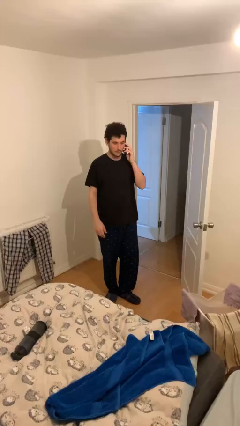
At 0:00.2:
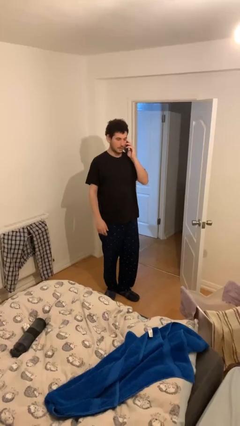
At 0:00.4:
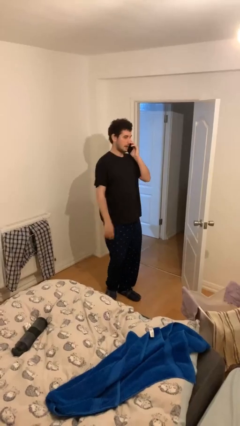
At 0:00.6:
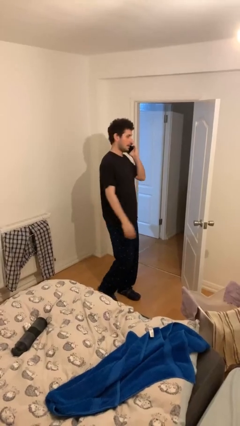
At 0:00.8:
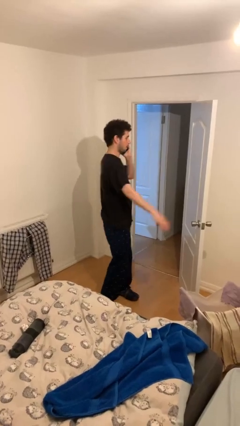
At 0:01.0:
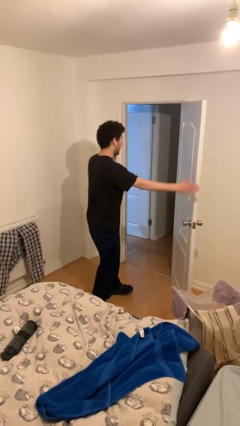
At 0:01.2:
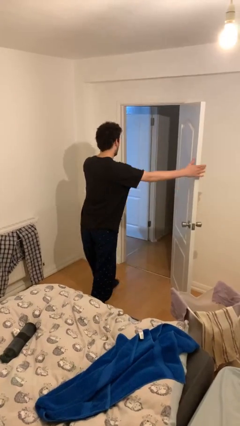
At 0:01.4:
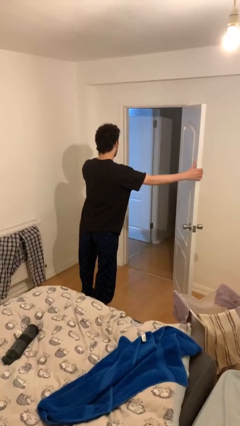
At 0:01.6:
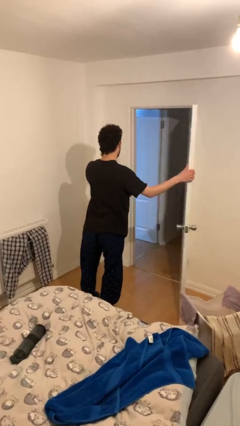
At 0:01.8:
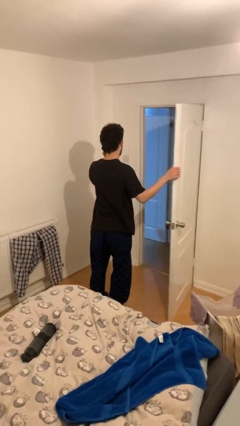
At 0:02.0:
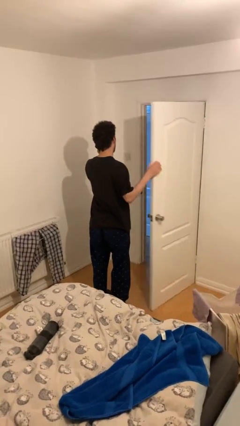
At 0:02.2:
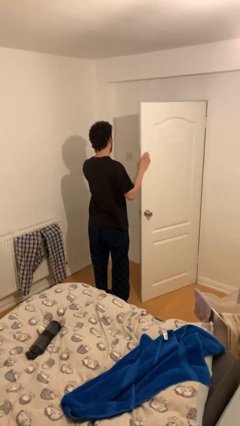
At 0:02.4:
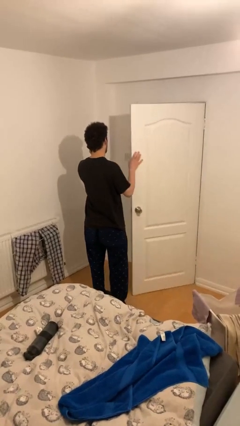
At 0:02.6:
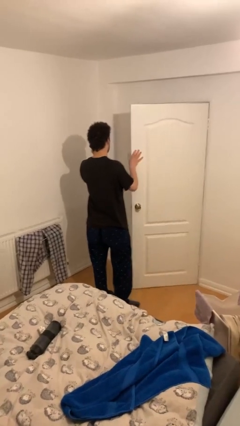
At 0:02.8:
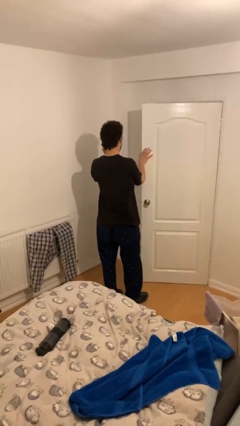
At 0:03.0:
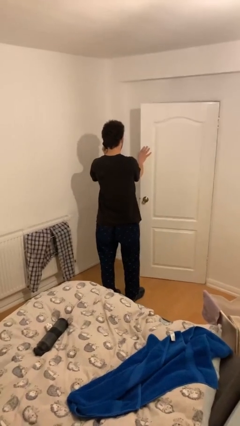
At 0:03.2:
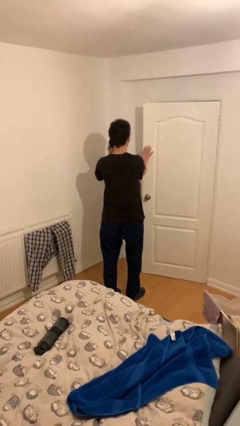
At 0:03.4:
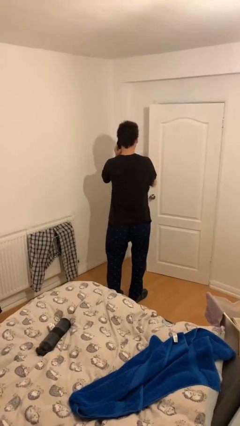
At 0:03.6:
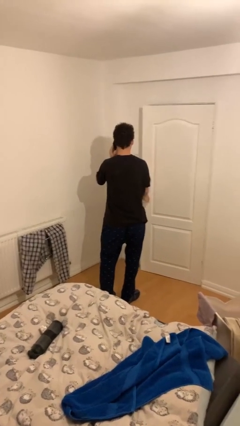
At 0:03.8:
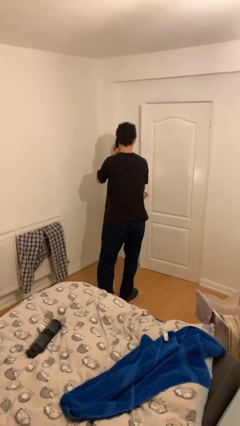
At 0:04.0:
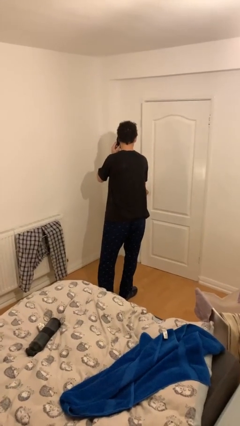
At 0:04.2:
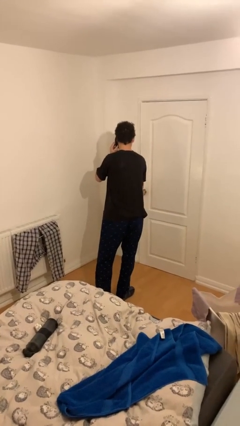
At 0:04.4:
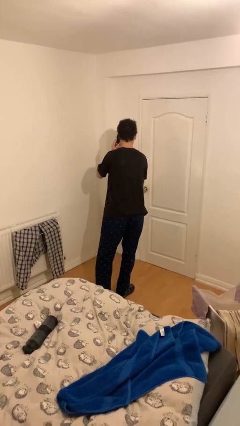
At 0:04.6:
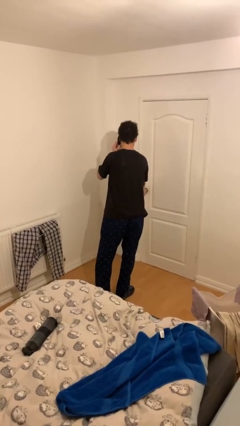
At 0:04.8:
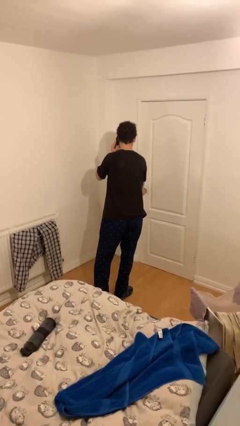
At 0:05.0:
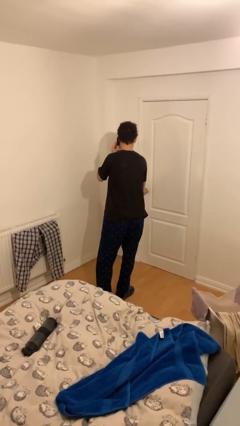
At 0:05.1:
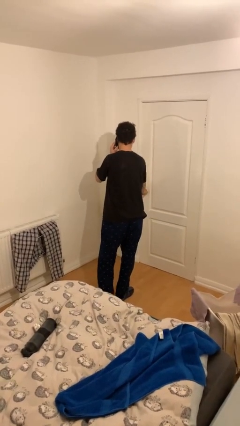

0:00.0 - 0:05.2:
person closes facility door

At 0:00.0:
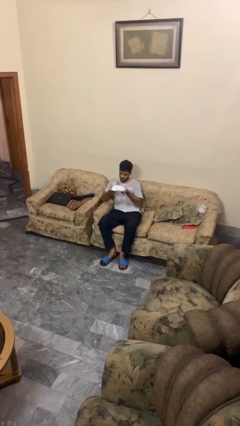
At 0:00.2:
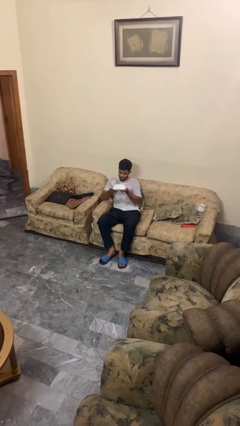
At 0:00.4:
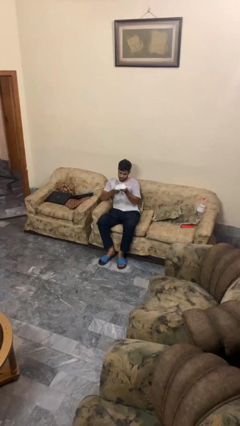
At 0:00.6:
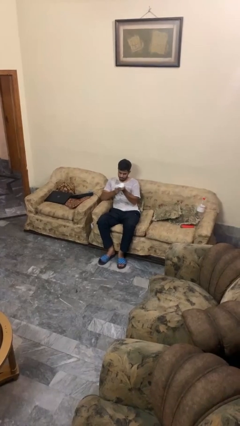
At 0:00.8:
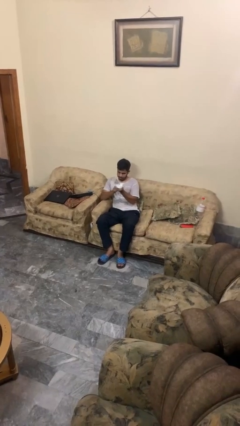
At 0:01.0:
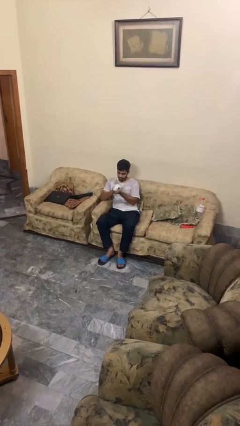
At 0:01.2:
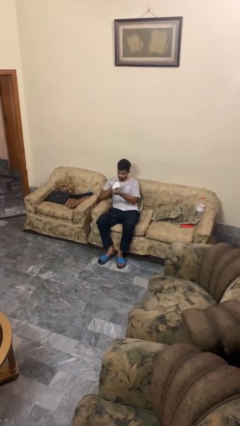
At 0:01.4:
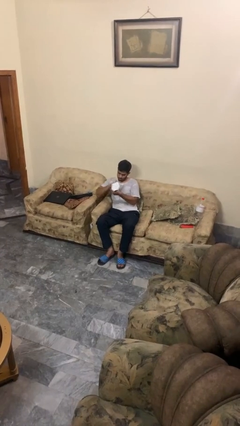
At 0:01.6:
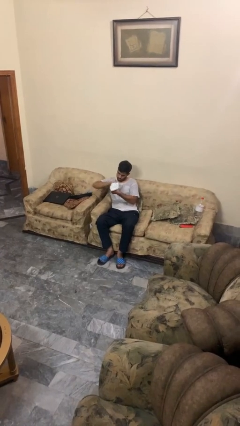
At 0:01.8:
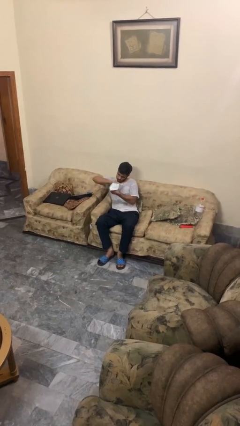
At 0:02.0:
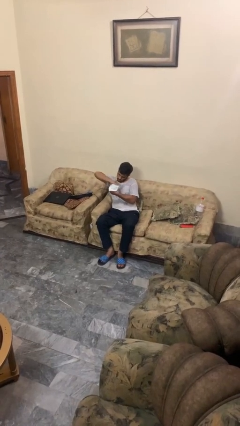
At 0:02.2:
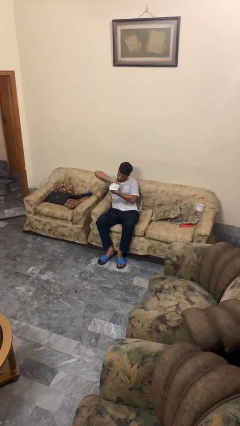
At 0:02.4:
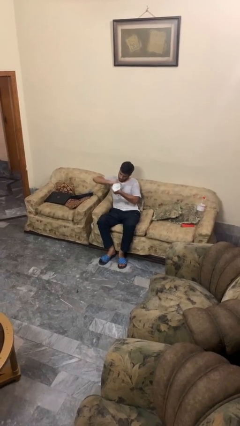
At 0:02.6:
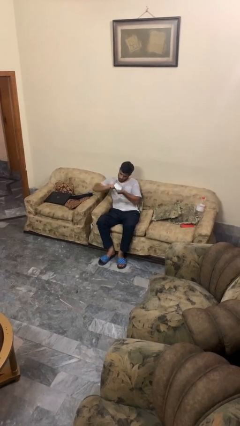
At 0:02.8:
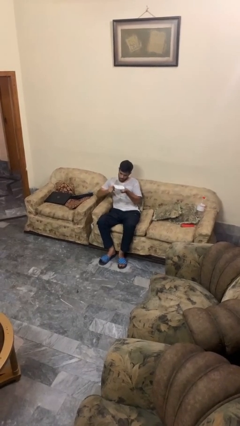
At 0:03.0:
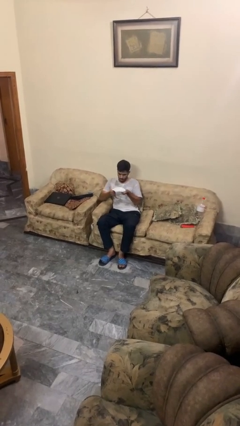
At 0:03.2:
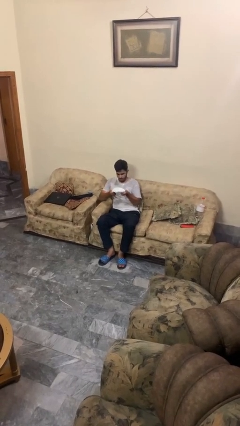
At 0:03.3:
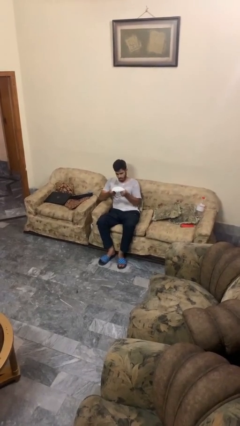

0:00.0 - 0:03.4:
person squeezes object

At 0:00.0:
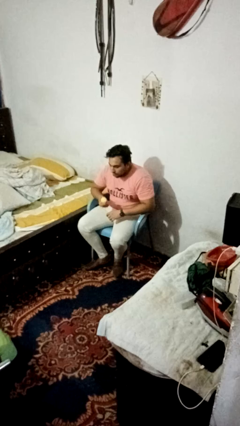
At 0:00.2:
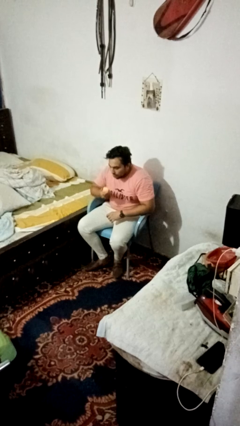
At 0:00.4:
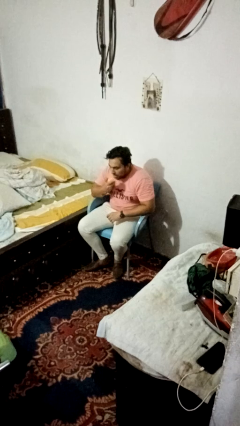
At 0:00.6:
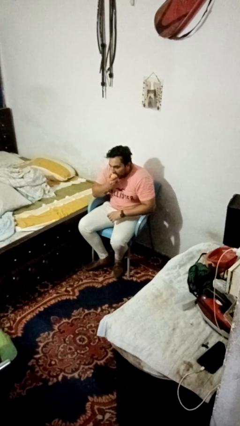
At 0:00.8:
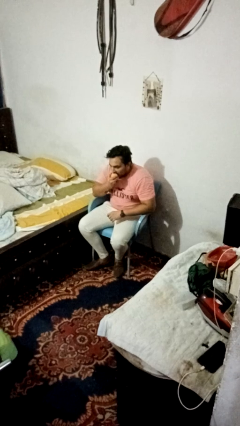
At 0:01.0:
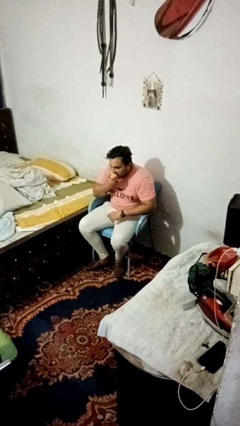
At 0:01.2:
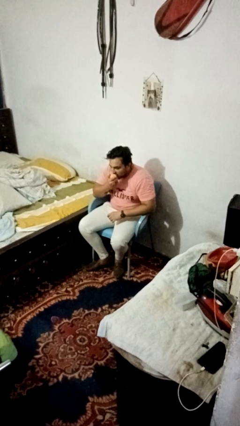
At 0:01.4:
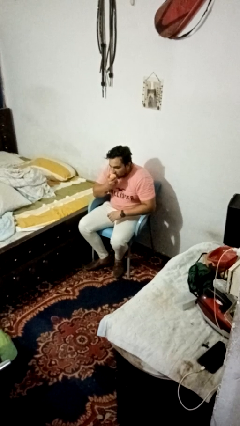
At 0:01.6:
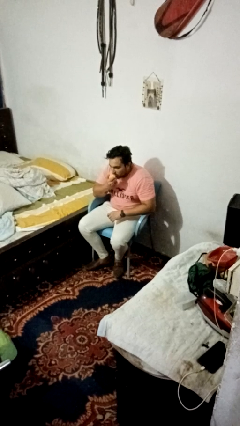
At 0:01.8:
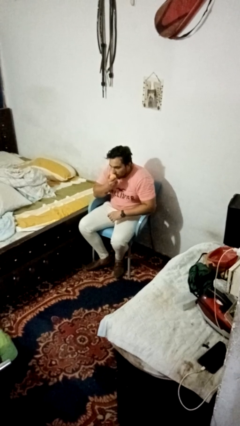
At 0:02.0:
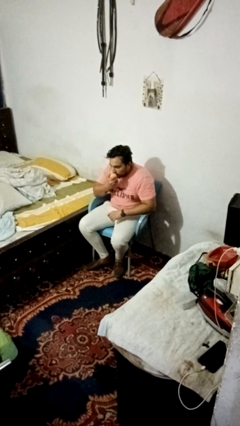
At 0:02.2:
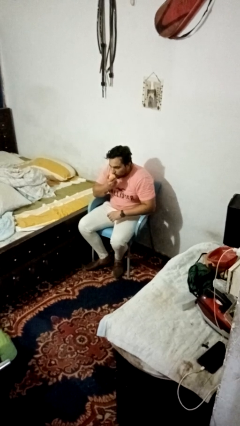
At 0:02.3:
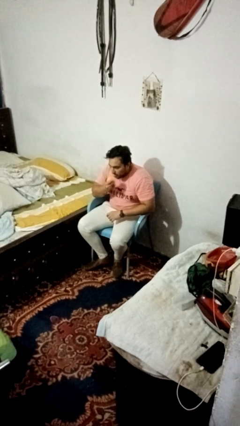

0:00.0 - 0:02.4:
person eats apple

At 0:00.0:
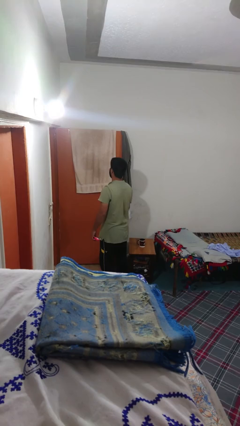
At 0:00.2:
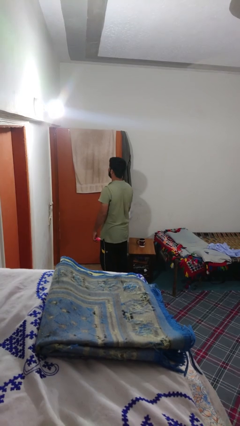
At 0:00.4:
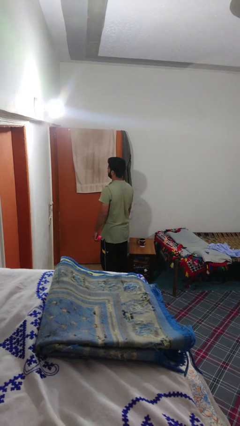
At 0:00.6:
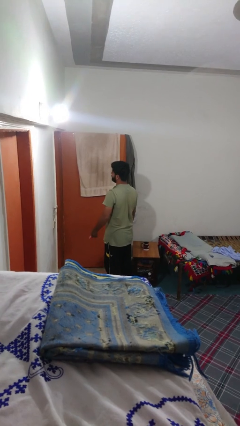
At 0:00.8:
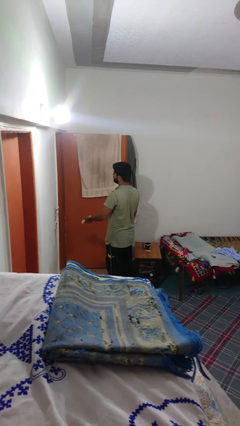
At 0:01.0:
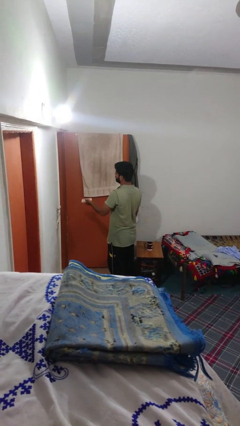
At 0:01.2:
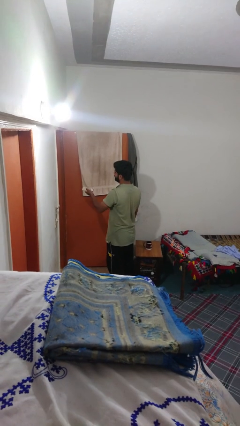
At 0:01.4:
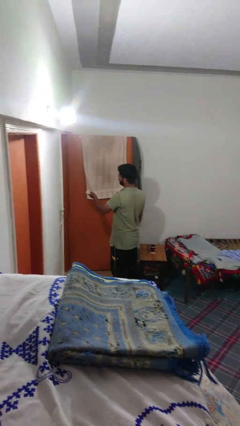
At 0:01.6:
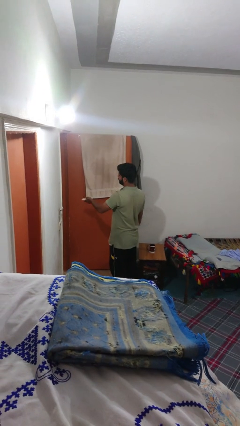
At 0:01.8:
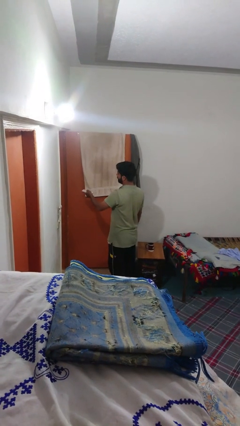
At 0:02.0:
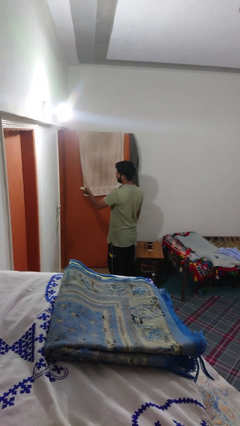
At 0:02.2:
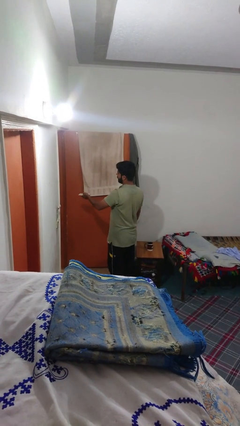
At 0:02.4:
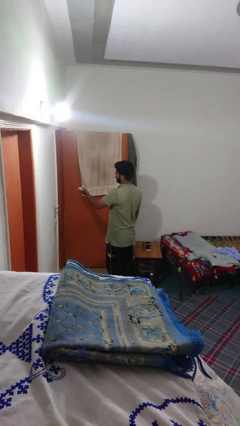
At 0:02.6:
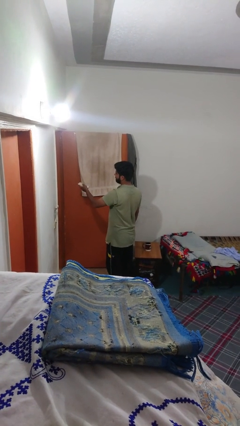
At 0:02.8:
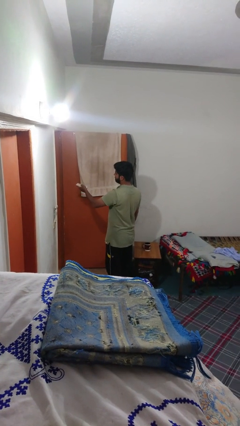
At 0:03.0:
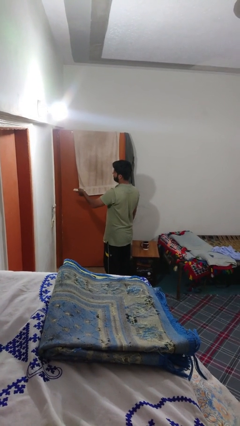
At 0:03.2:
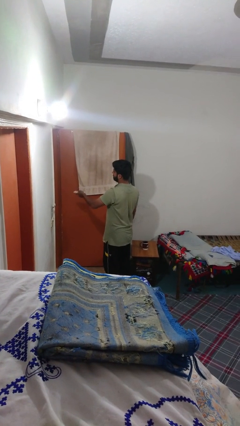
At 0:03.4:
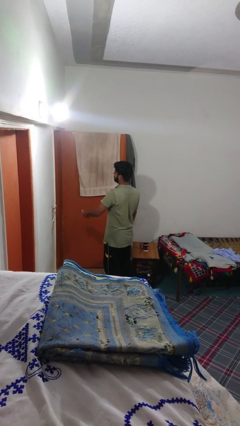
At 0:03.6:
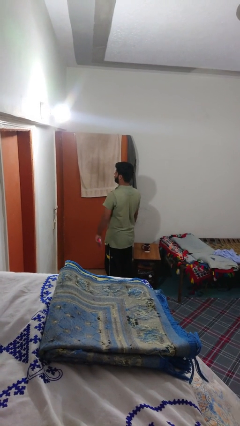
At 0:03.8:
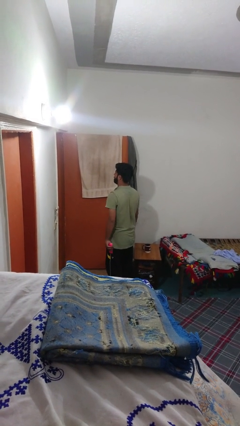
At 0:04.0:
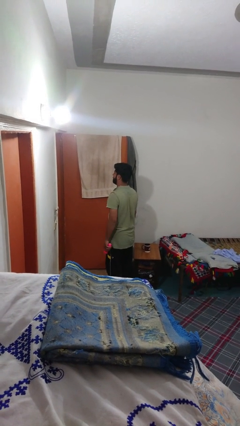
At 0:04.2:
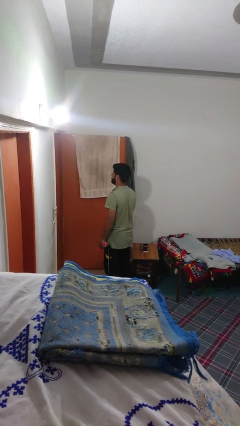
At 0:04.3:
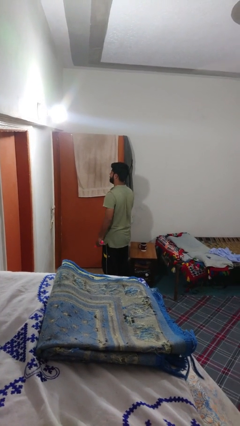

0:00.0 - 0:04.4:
person uses television remote

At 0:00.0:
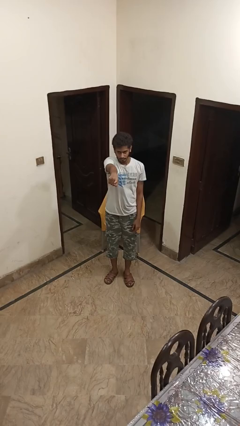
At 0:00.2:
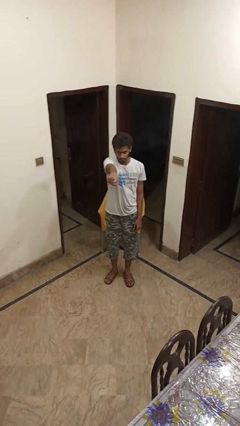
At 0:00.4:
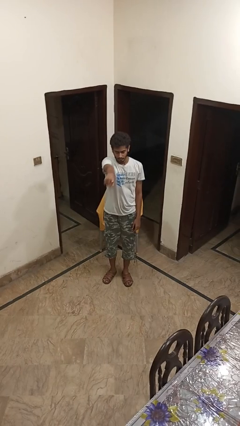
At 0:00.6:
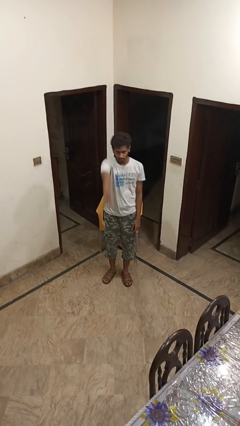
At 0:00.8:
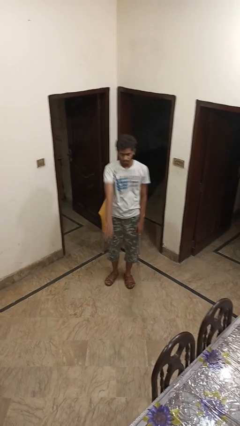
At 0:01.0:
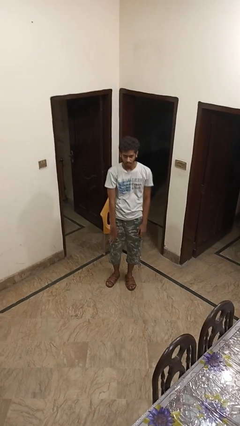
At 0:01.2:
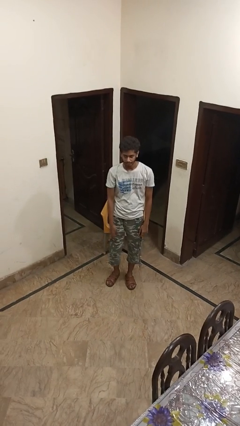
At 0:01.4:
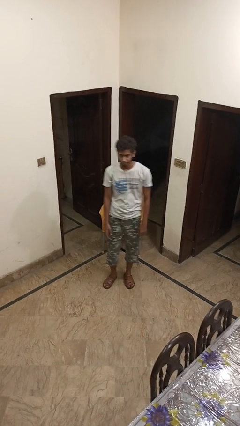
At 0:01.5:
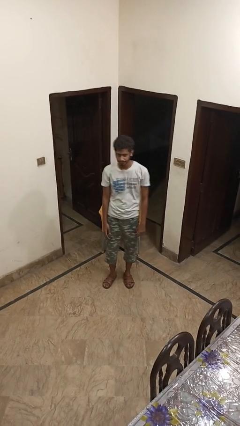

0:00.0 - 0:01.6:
person points at person

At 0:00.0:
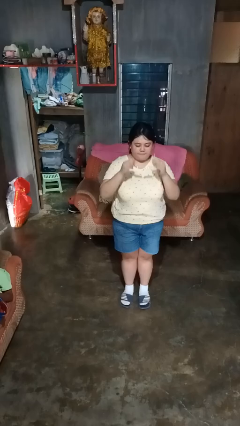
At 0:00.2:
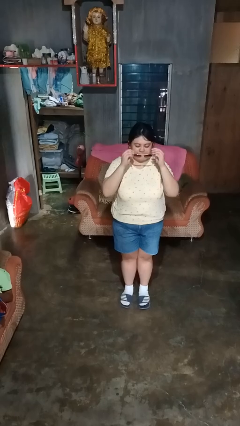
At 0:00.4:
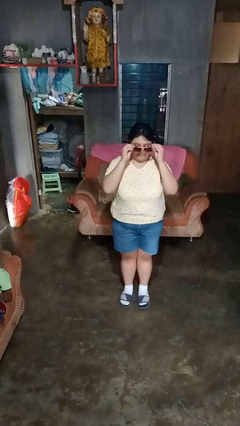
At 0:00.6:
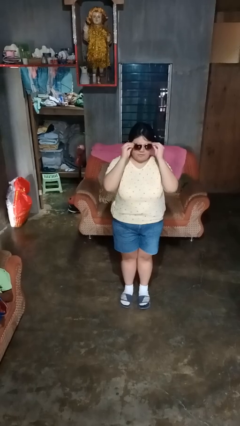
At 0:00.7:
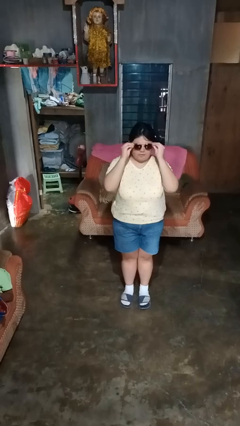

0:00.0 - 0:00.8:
person puts on sunglasses
